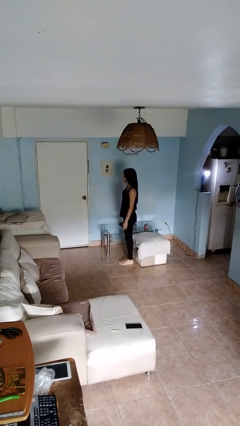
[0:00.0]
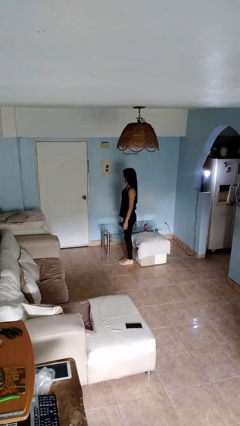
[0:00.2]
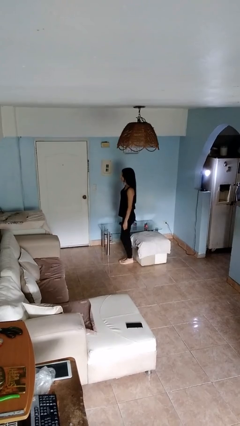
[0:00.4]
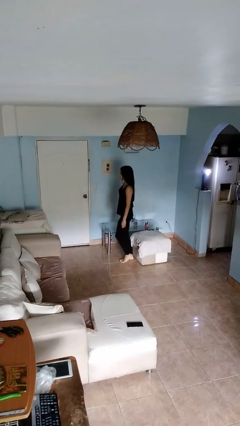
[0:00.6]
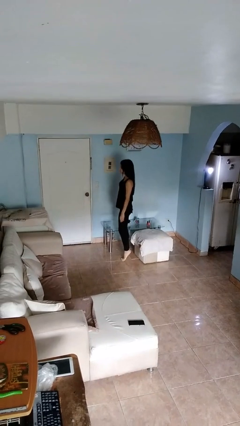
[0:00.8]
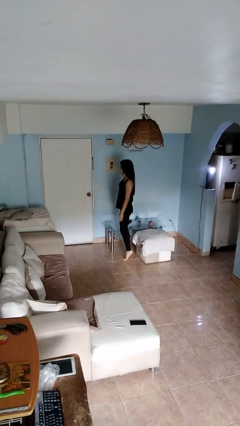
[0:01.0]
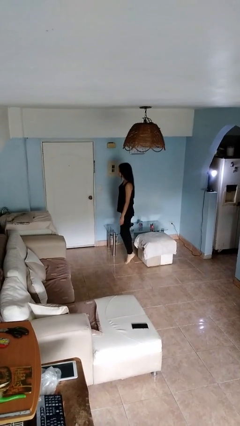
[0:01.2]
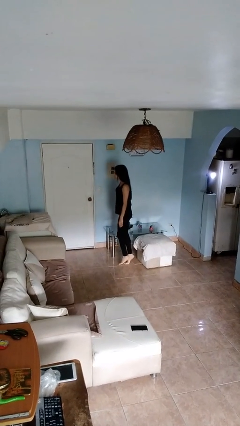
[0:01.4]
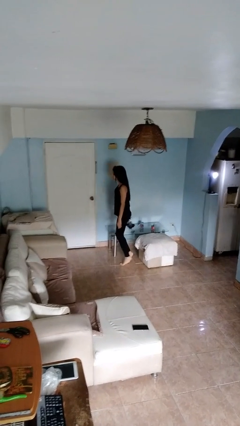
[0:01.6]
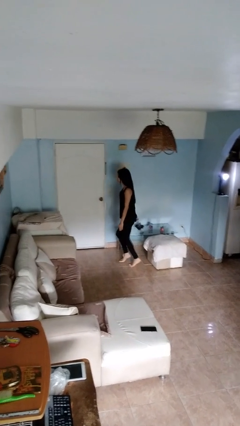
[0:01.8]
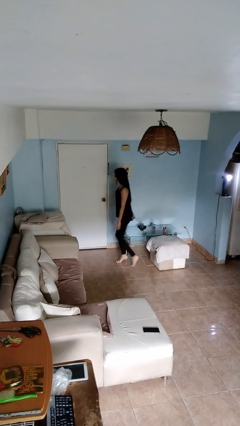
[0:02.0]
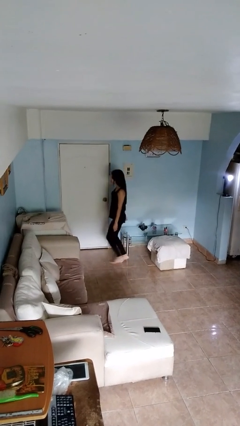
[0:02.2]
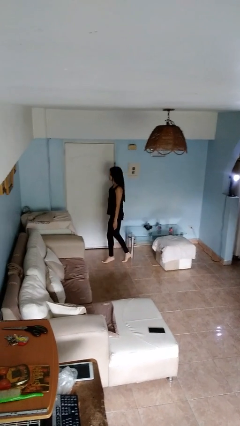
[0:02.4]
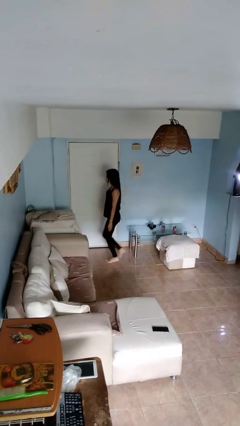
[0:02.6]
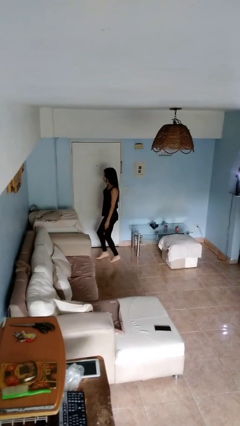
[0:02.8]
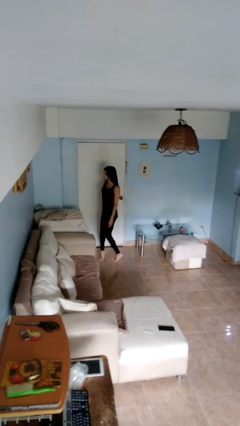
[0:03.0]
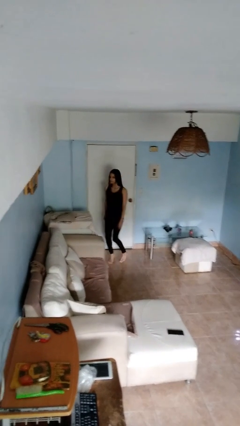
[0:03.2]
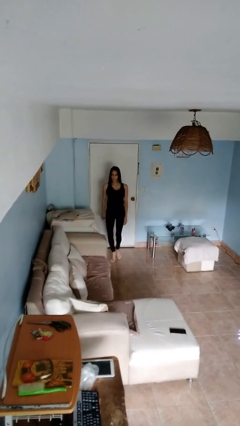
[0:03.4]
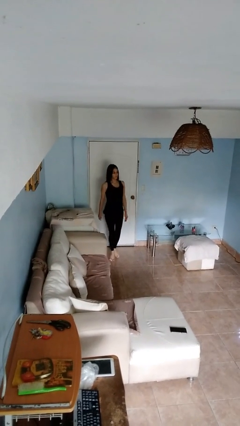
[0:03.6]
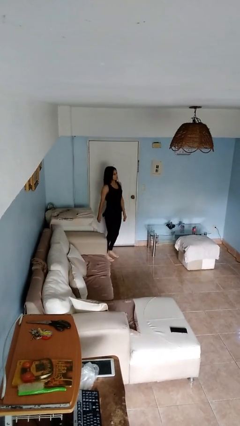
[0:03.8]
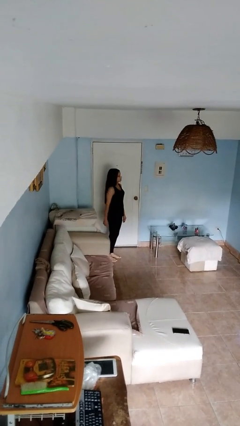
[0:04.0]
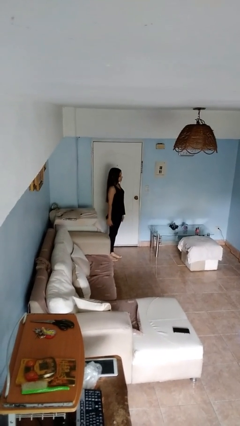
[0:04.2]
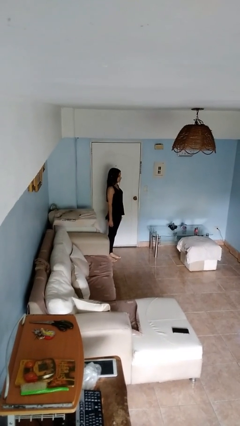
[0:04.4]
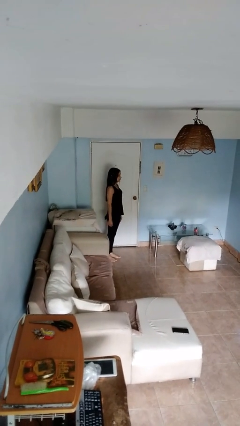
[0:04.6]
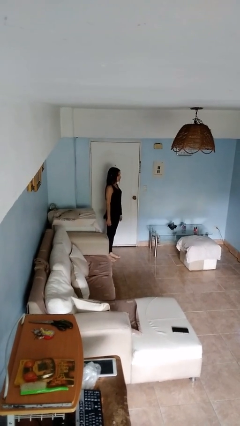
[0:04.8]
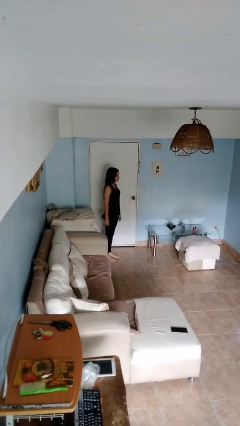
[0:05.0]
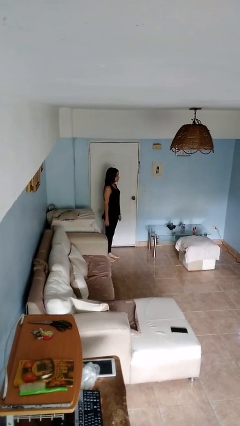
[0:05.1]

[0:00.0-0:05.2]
person walks tiptoe

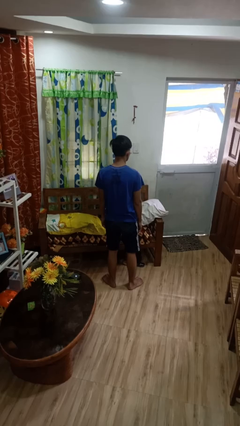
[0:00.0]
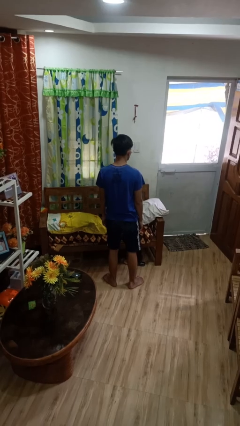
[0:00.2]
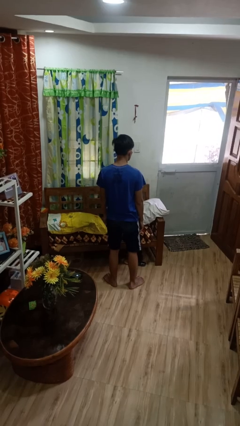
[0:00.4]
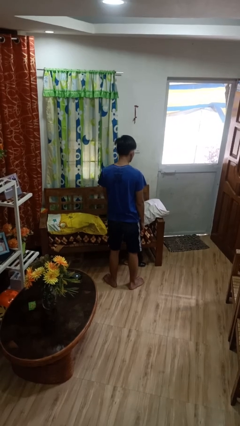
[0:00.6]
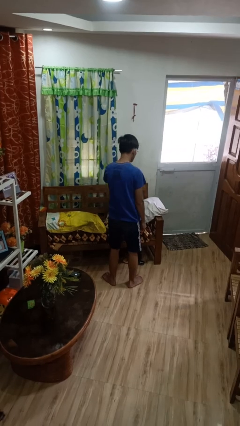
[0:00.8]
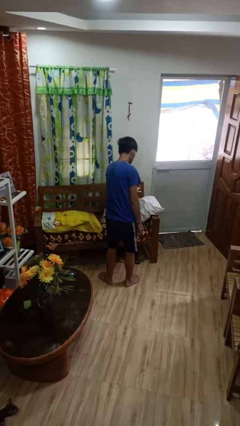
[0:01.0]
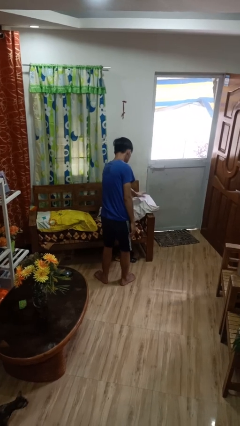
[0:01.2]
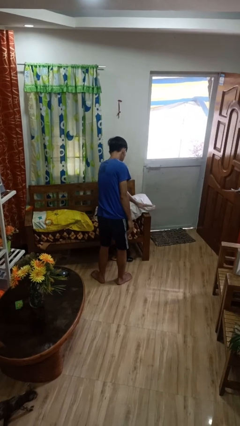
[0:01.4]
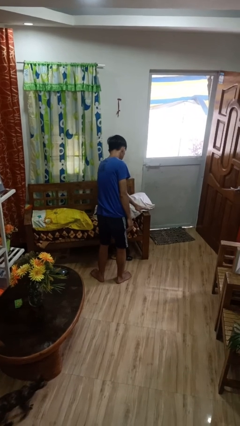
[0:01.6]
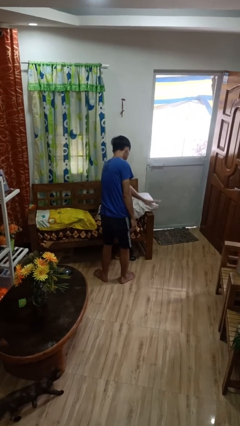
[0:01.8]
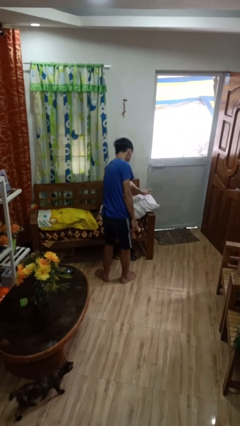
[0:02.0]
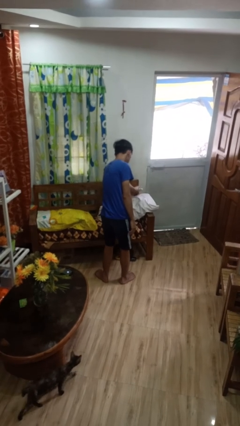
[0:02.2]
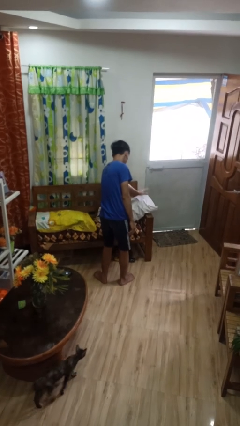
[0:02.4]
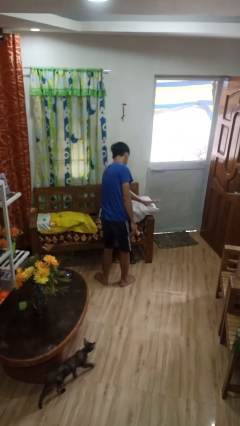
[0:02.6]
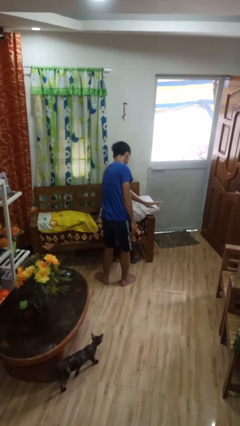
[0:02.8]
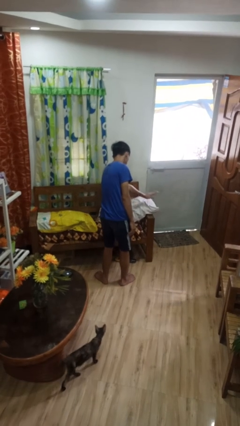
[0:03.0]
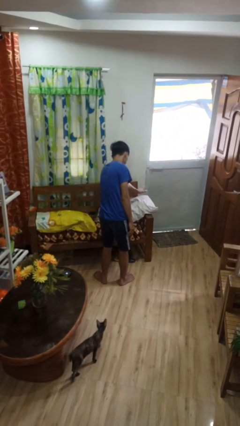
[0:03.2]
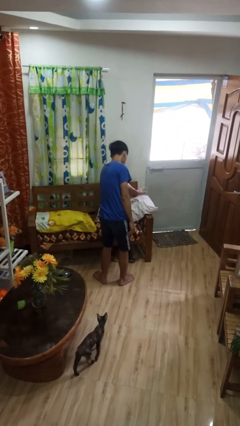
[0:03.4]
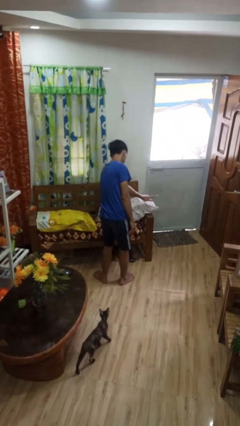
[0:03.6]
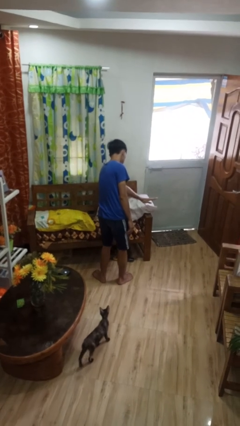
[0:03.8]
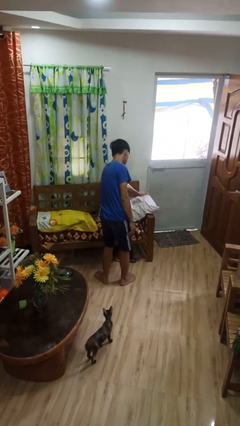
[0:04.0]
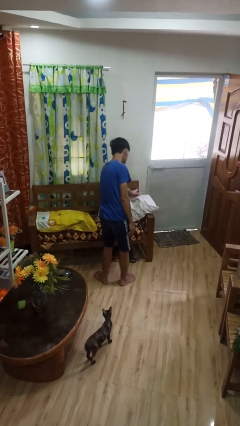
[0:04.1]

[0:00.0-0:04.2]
person waves hand over object

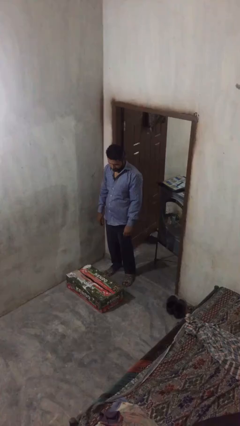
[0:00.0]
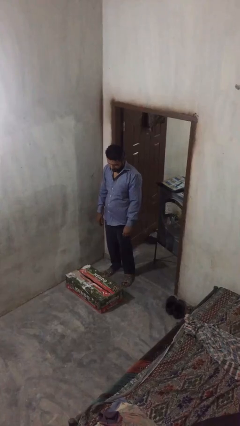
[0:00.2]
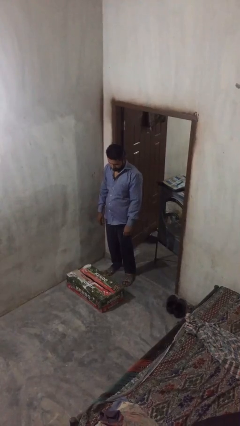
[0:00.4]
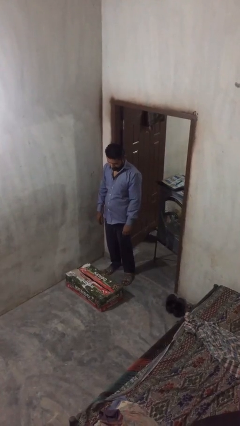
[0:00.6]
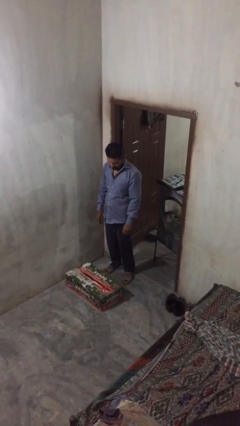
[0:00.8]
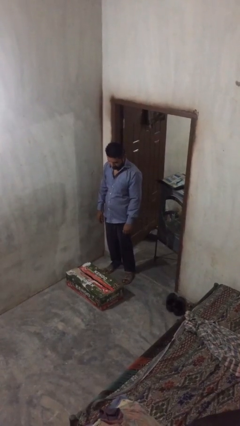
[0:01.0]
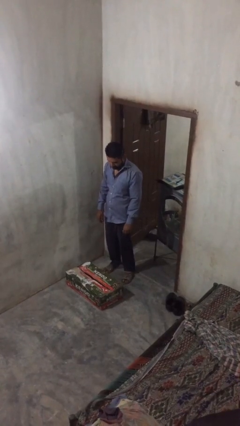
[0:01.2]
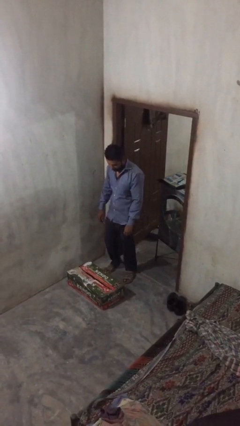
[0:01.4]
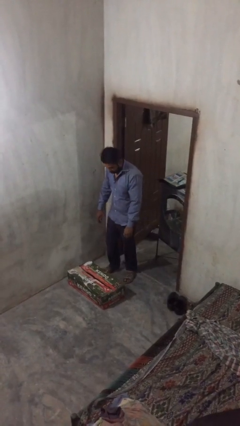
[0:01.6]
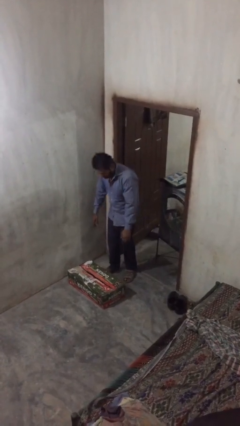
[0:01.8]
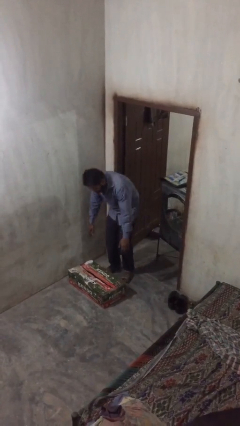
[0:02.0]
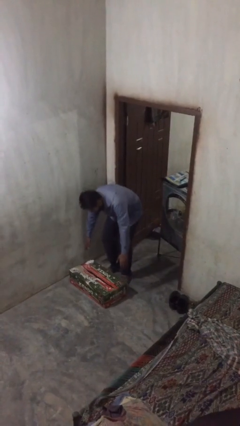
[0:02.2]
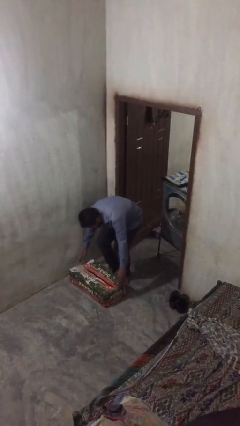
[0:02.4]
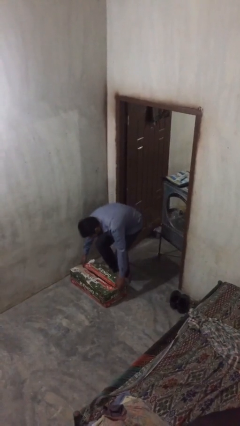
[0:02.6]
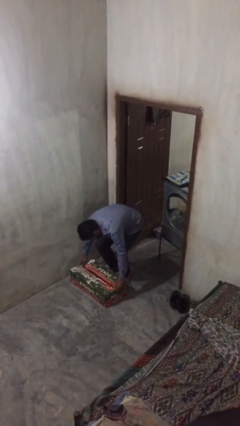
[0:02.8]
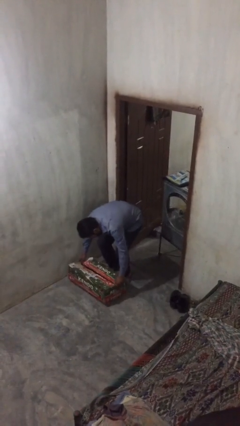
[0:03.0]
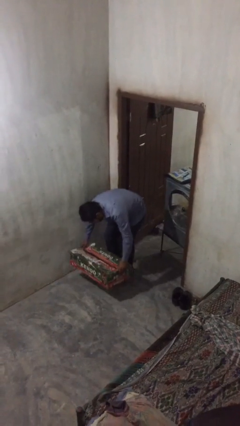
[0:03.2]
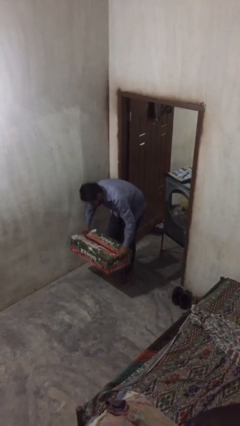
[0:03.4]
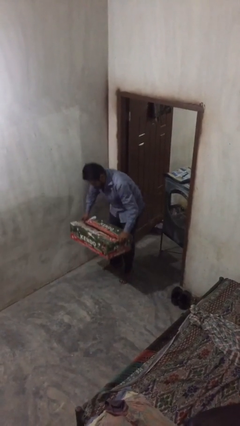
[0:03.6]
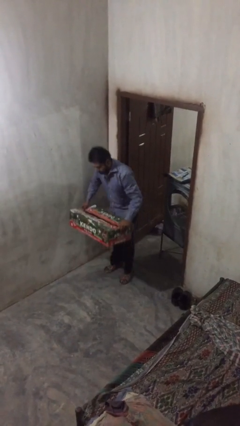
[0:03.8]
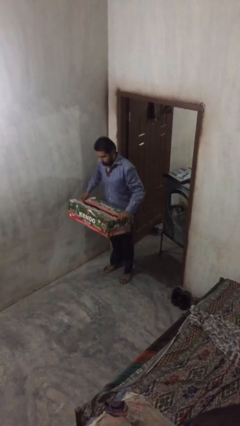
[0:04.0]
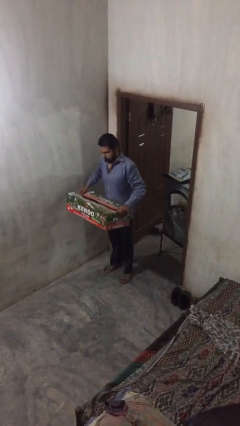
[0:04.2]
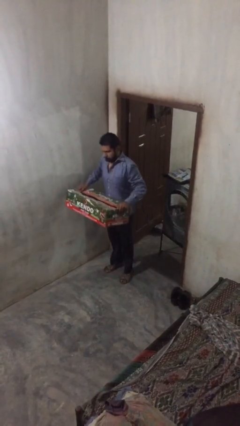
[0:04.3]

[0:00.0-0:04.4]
person picks up object from floor

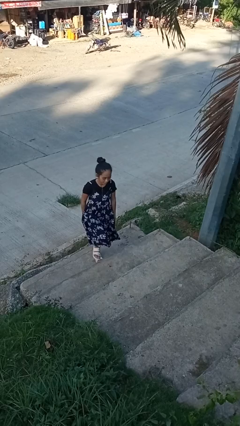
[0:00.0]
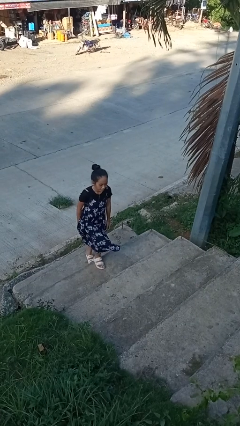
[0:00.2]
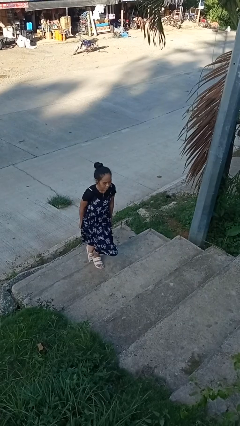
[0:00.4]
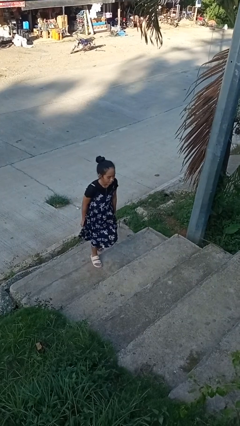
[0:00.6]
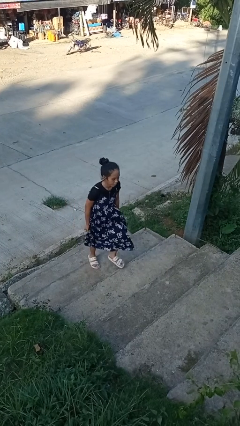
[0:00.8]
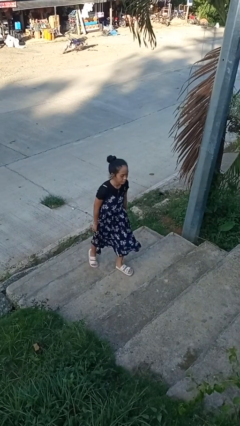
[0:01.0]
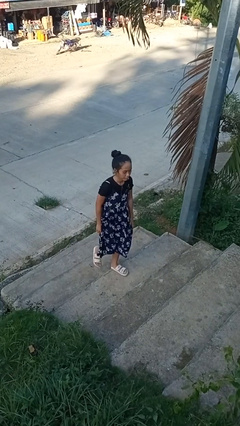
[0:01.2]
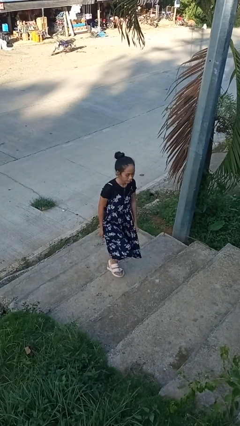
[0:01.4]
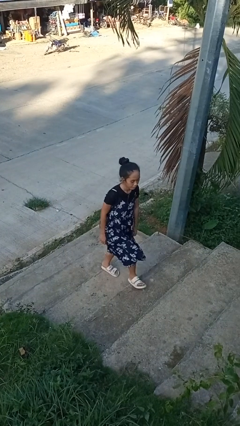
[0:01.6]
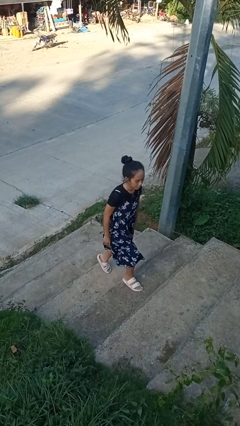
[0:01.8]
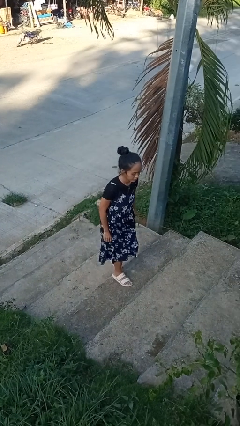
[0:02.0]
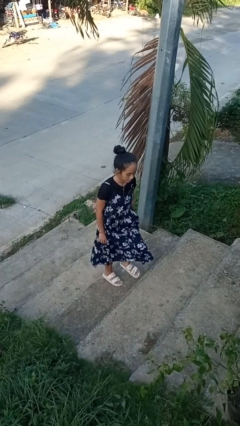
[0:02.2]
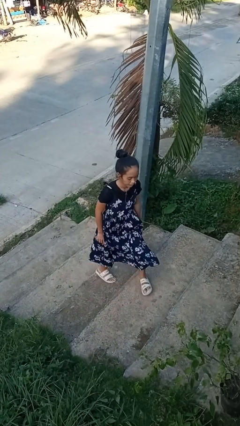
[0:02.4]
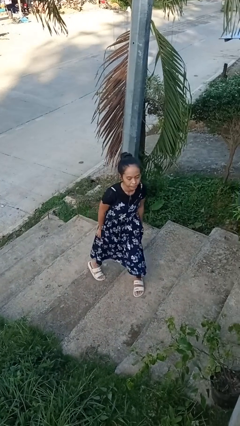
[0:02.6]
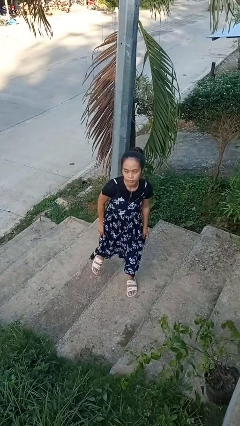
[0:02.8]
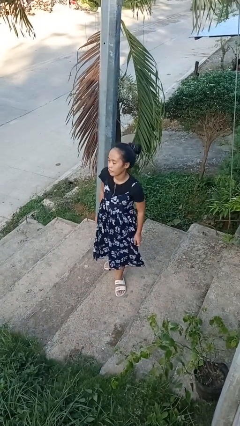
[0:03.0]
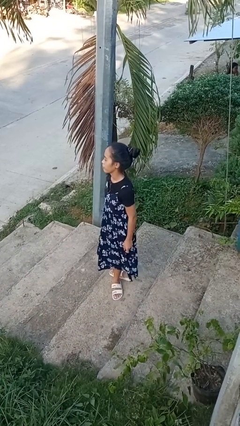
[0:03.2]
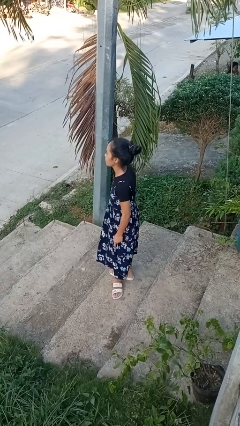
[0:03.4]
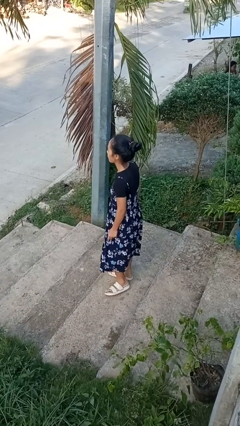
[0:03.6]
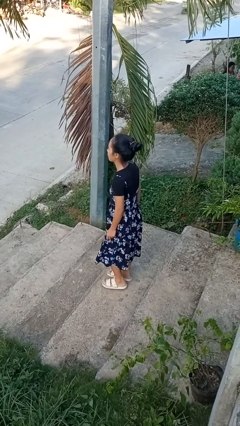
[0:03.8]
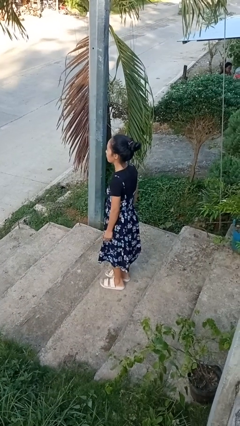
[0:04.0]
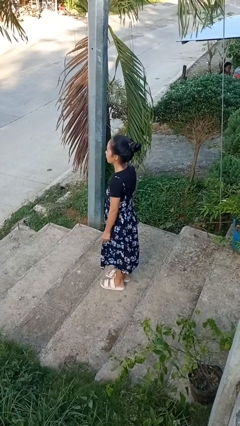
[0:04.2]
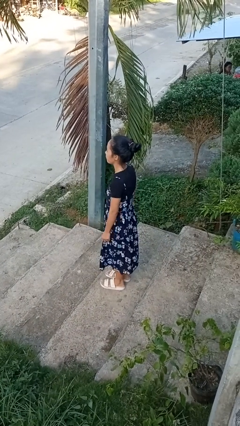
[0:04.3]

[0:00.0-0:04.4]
person climbs up stairs
